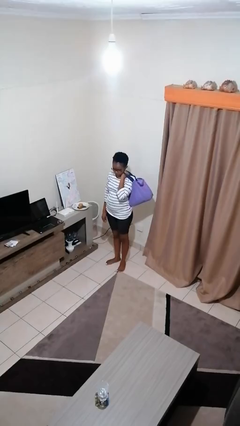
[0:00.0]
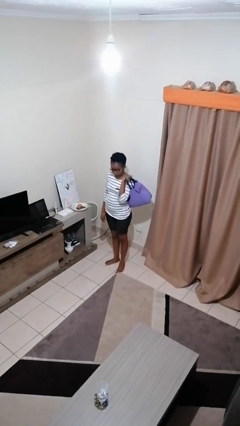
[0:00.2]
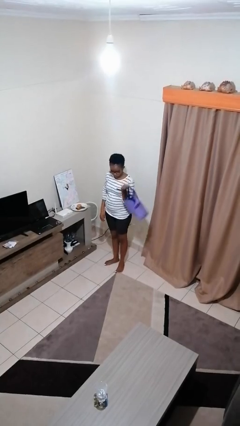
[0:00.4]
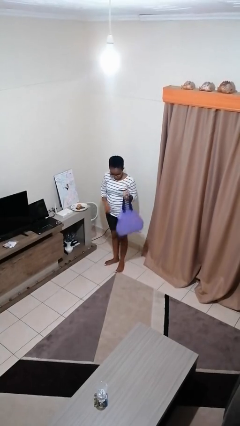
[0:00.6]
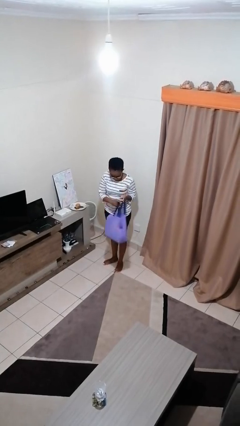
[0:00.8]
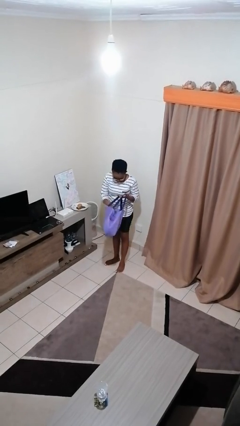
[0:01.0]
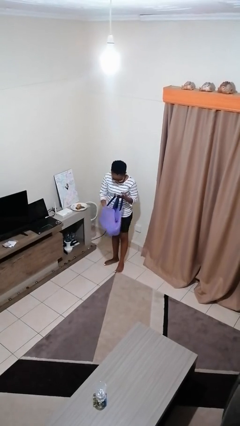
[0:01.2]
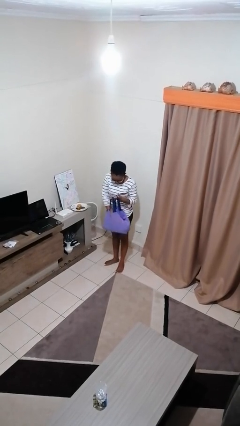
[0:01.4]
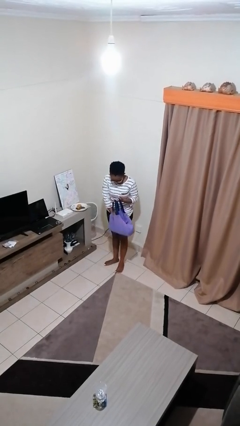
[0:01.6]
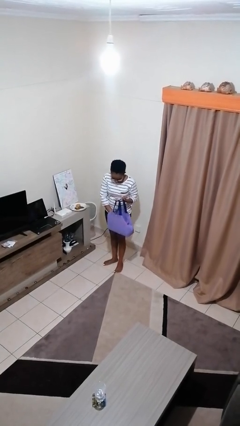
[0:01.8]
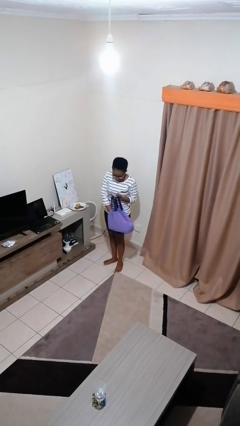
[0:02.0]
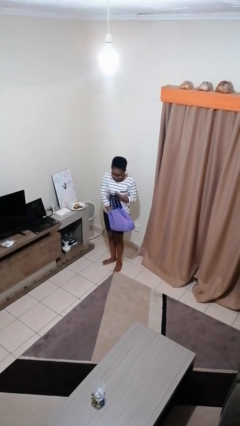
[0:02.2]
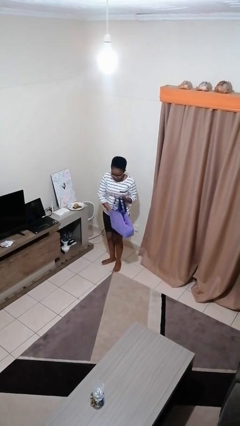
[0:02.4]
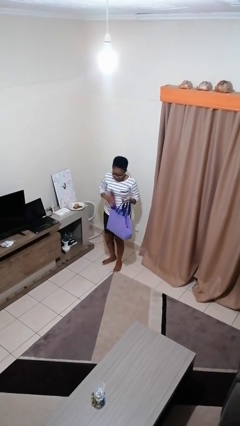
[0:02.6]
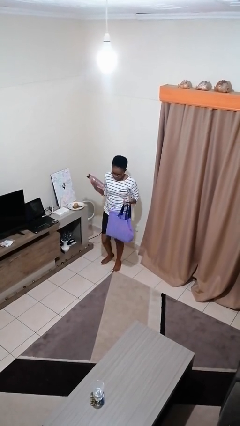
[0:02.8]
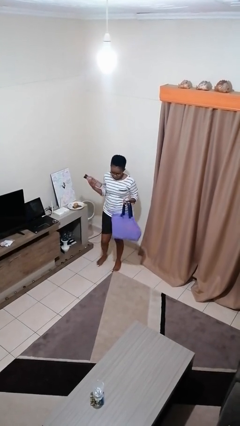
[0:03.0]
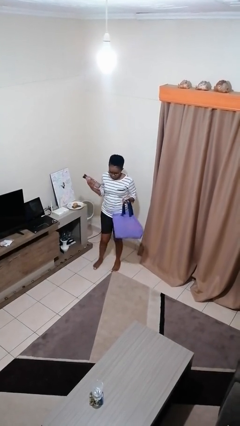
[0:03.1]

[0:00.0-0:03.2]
person takes object from bag

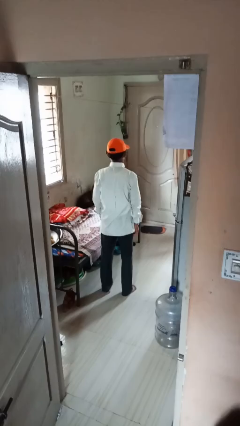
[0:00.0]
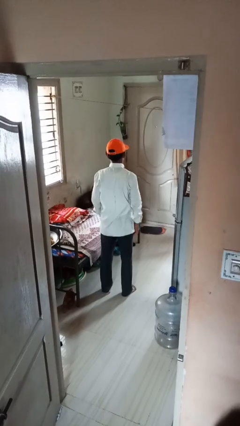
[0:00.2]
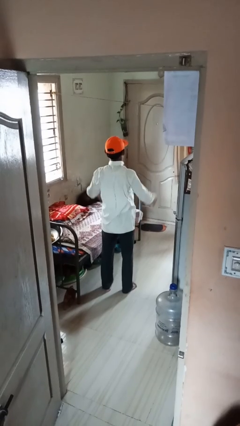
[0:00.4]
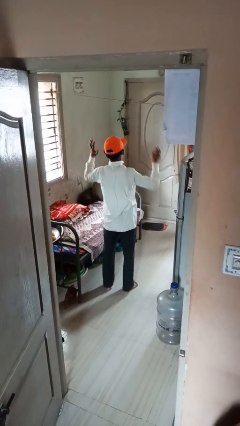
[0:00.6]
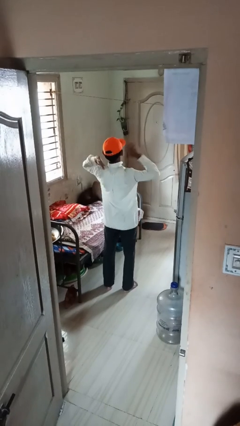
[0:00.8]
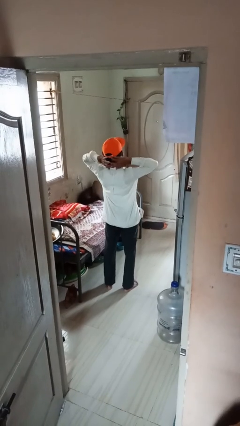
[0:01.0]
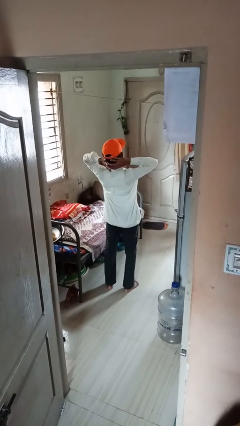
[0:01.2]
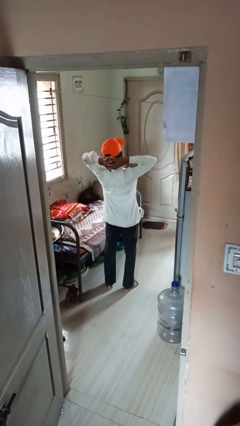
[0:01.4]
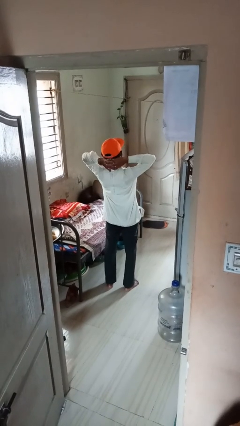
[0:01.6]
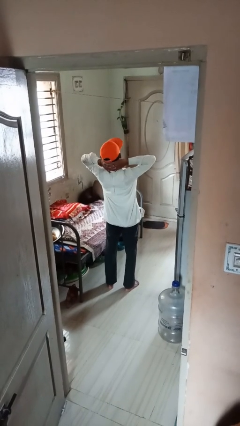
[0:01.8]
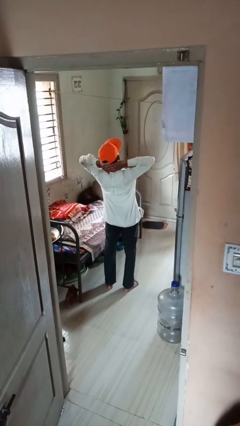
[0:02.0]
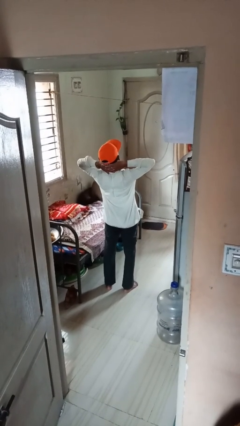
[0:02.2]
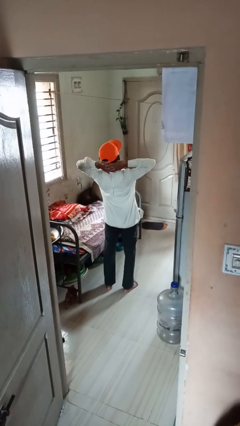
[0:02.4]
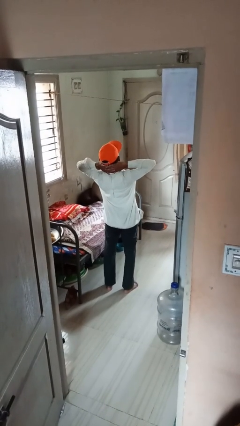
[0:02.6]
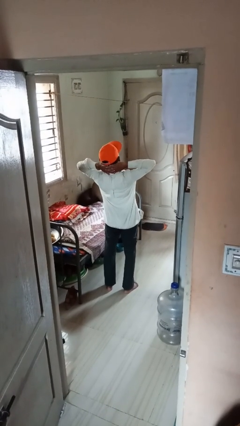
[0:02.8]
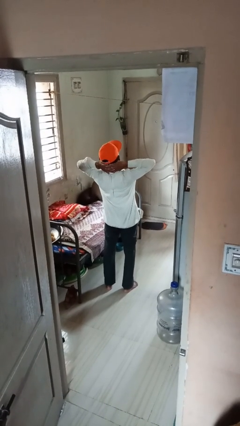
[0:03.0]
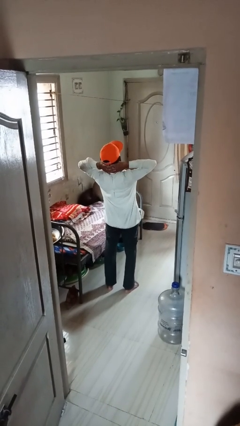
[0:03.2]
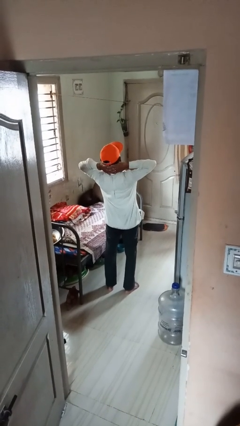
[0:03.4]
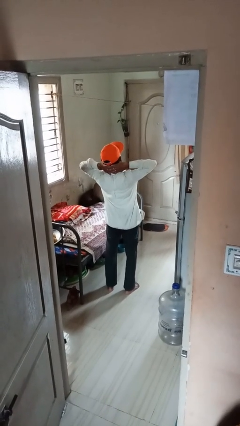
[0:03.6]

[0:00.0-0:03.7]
person cracks knuckles

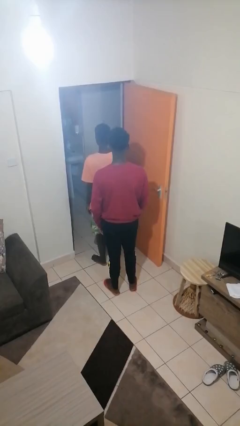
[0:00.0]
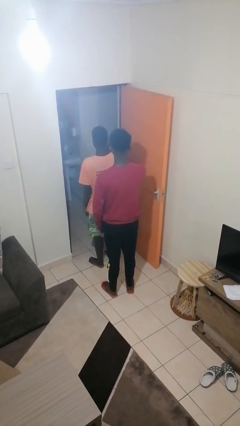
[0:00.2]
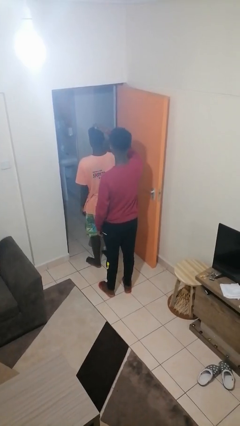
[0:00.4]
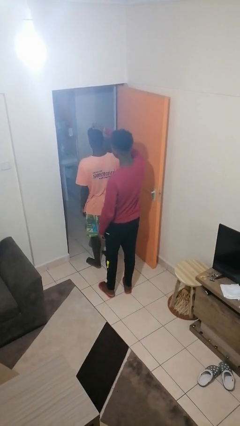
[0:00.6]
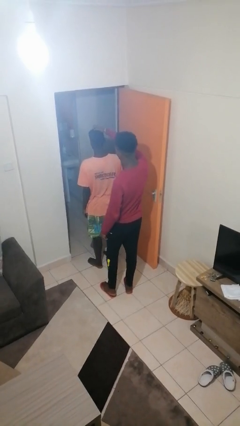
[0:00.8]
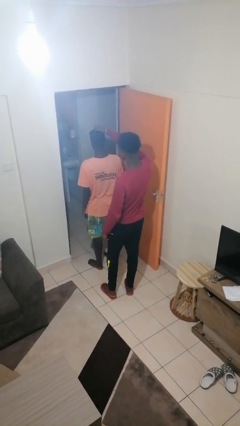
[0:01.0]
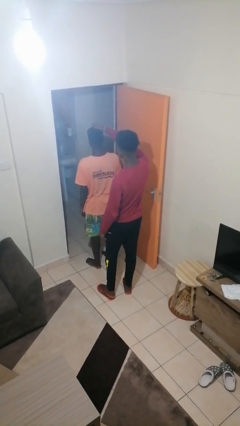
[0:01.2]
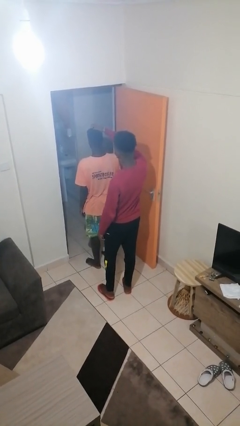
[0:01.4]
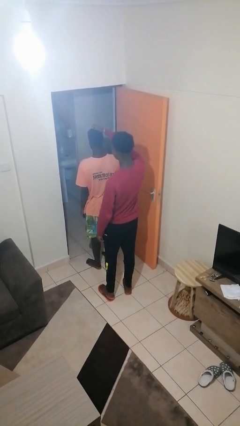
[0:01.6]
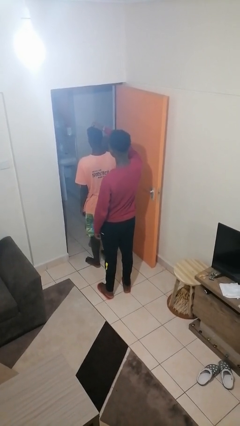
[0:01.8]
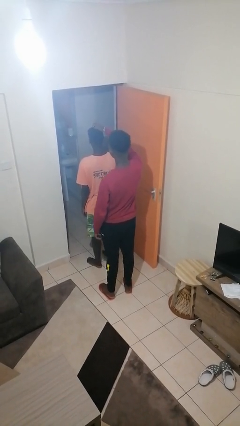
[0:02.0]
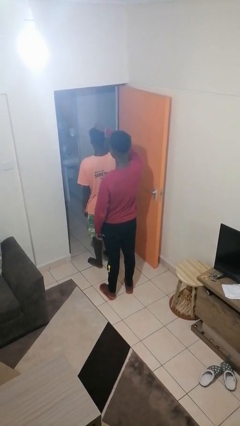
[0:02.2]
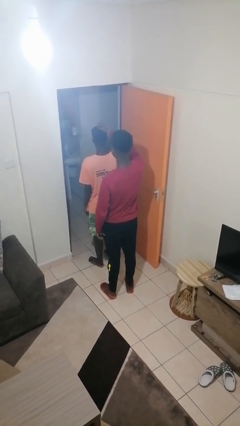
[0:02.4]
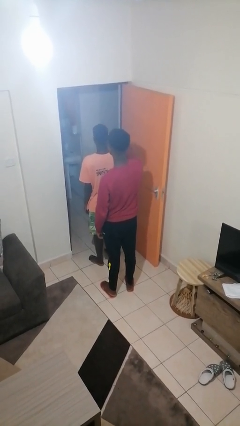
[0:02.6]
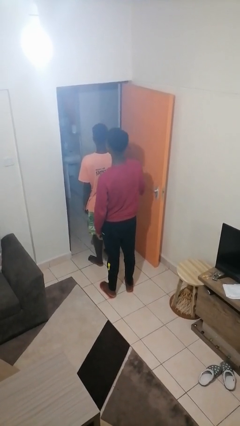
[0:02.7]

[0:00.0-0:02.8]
person grabs person by hair

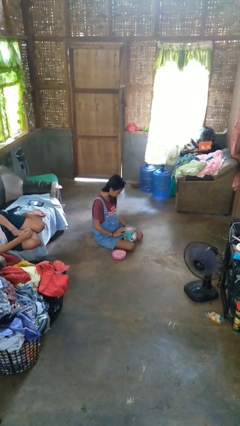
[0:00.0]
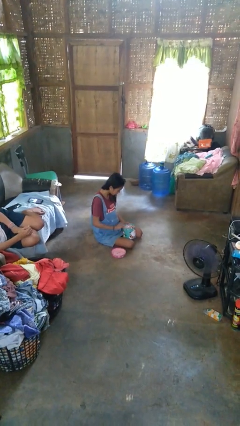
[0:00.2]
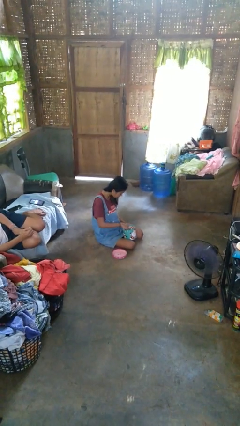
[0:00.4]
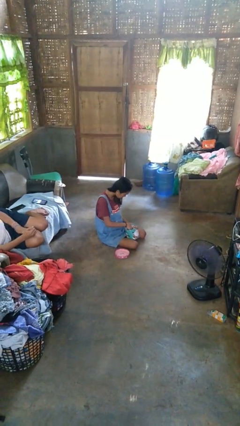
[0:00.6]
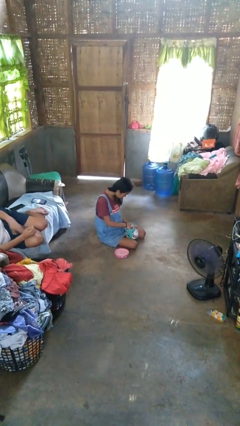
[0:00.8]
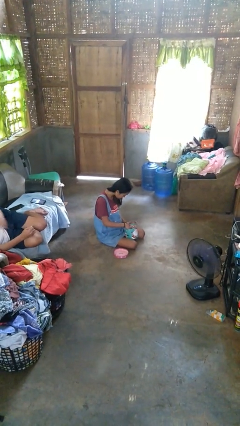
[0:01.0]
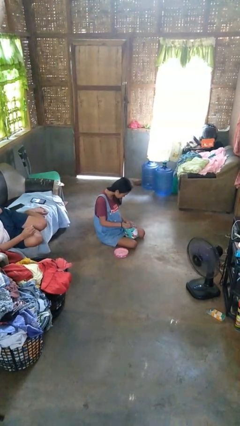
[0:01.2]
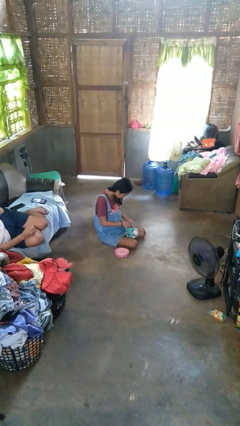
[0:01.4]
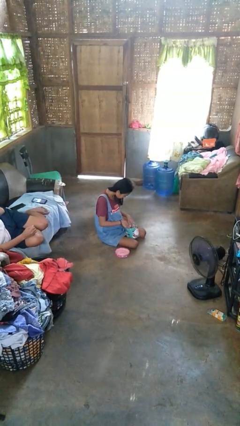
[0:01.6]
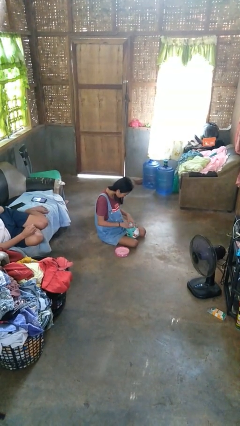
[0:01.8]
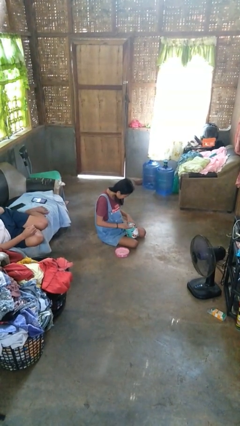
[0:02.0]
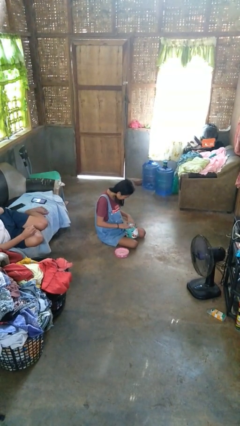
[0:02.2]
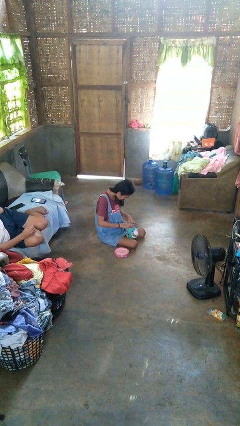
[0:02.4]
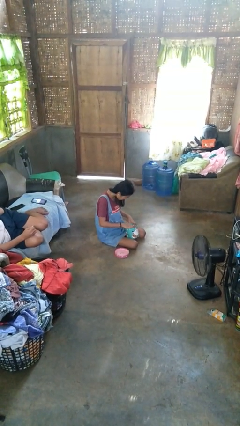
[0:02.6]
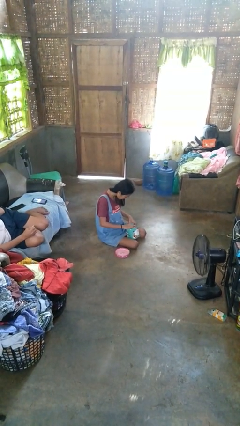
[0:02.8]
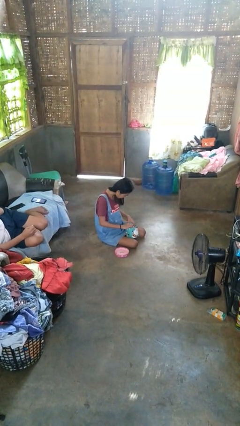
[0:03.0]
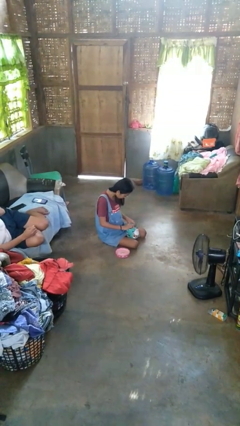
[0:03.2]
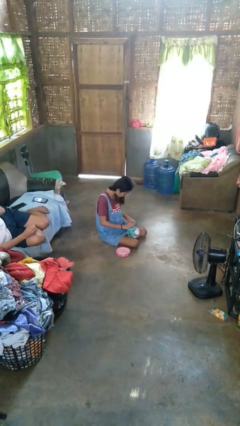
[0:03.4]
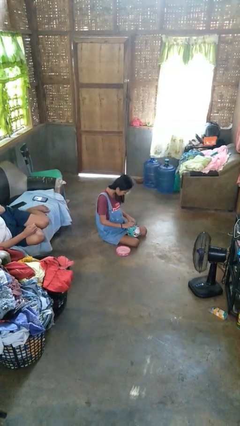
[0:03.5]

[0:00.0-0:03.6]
person searches jewelry box

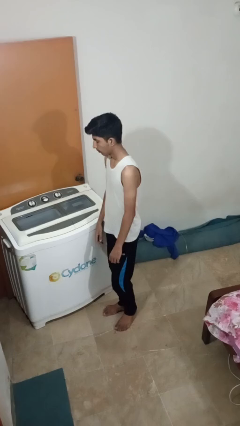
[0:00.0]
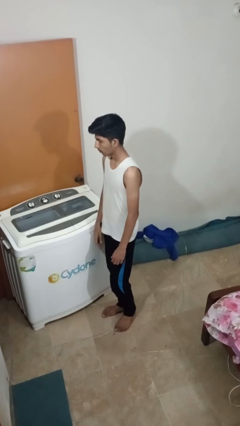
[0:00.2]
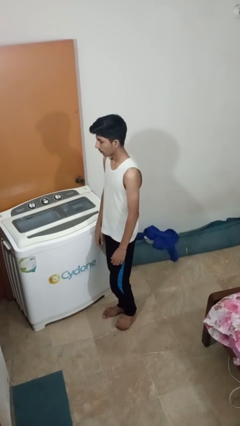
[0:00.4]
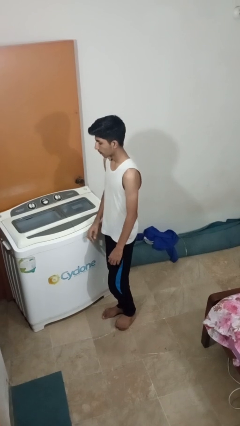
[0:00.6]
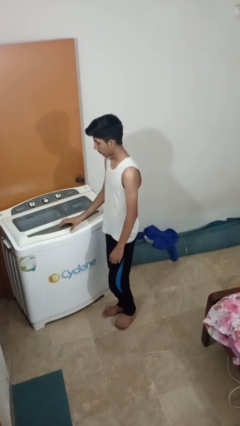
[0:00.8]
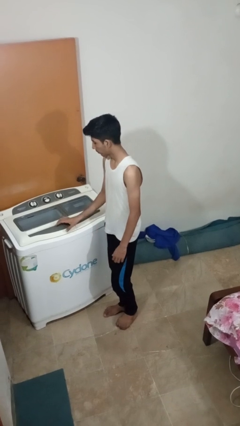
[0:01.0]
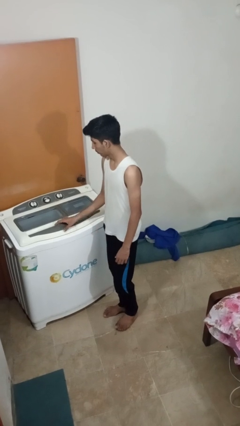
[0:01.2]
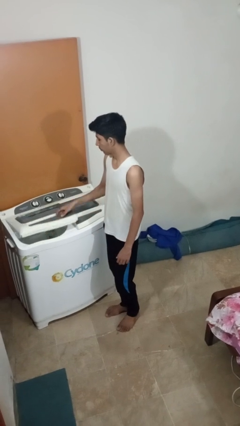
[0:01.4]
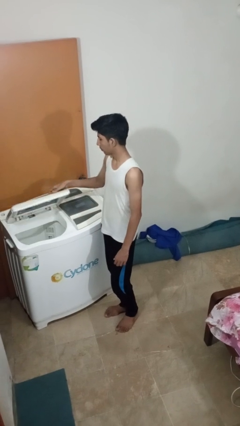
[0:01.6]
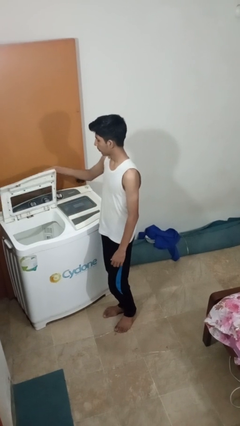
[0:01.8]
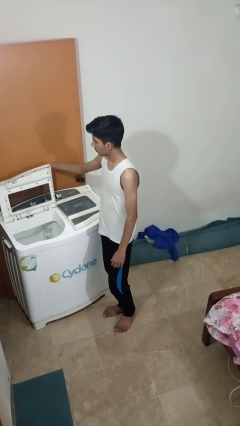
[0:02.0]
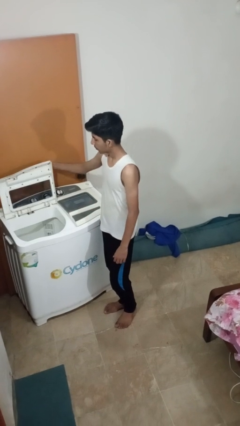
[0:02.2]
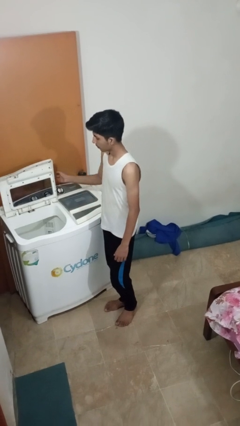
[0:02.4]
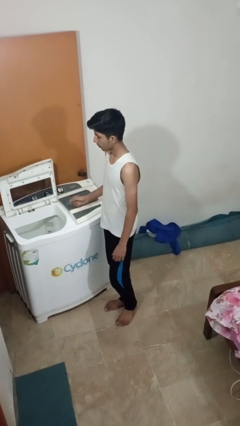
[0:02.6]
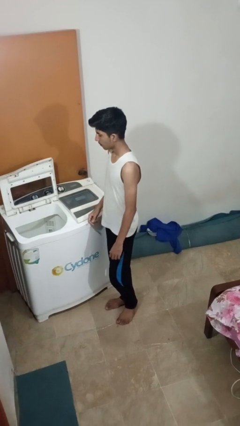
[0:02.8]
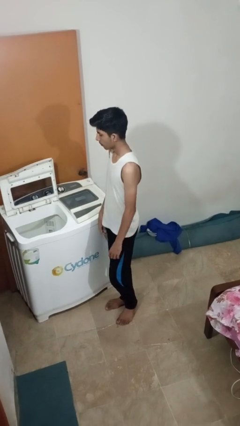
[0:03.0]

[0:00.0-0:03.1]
person opens clothes washer

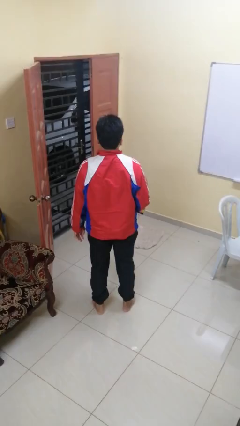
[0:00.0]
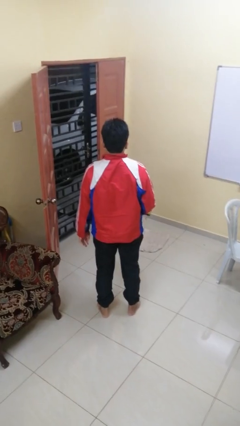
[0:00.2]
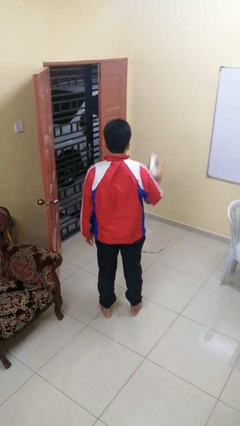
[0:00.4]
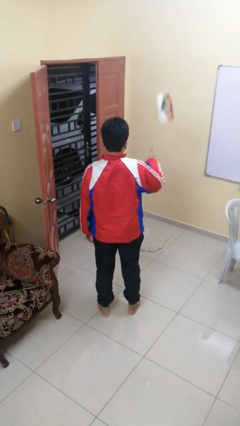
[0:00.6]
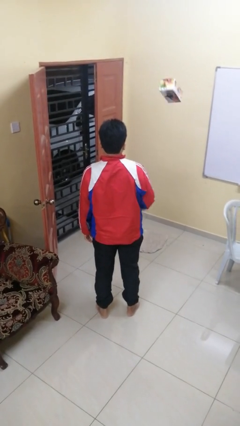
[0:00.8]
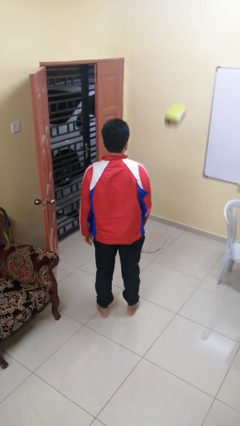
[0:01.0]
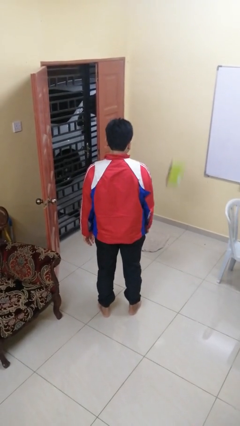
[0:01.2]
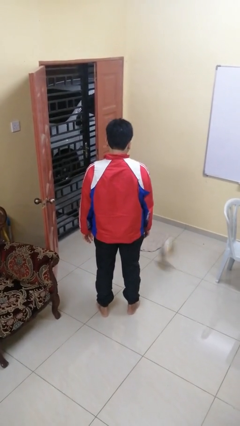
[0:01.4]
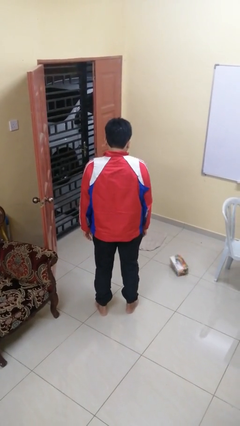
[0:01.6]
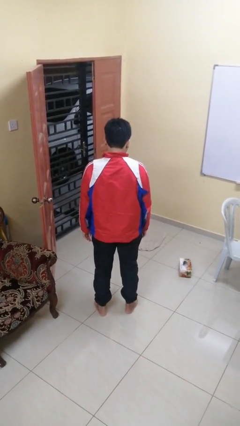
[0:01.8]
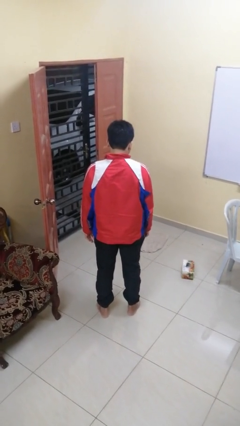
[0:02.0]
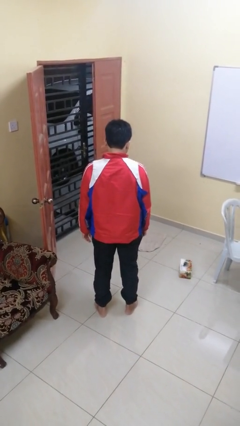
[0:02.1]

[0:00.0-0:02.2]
person throws object into air
